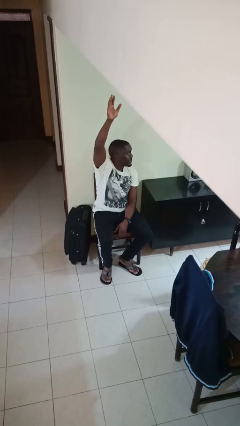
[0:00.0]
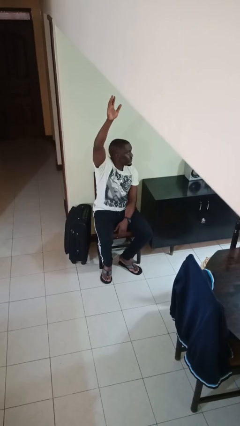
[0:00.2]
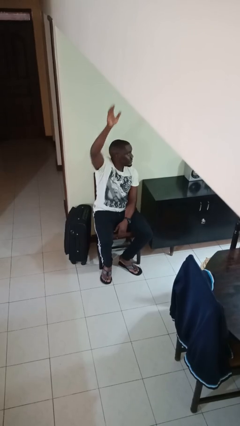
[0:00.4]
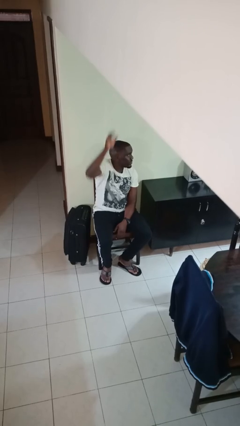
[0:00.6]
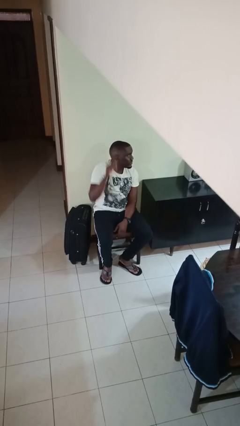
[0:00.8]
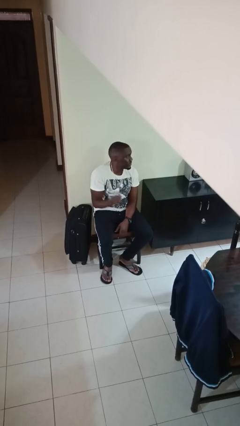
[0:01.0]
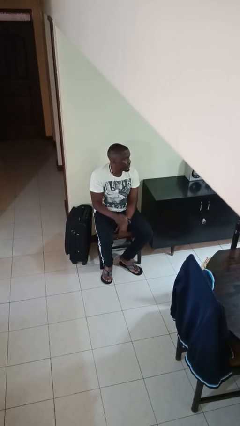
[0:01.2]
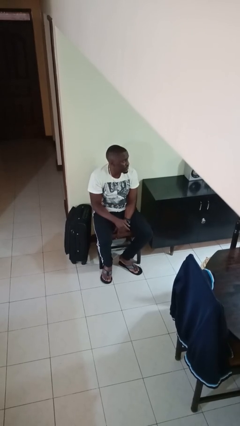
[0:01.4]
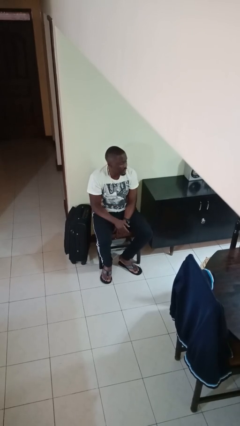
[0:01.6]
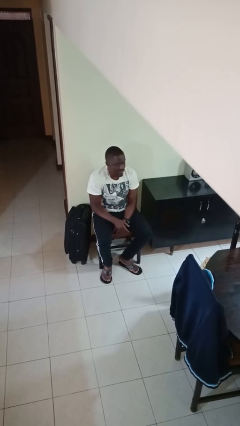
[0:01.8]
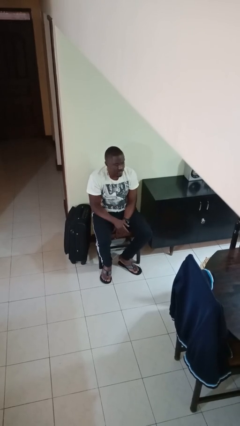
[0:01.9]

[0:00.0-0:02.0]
person gestures lower hand

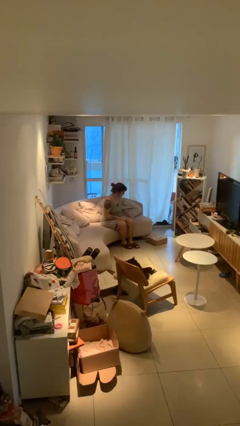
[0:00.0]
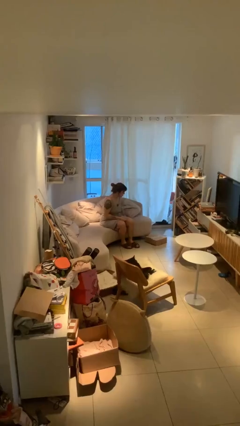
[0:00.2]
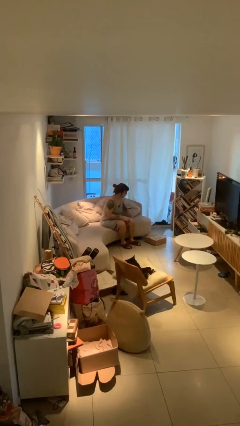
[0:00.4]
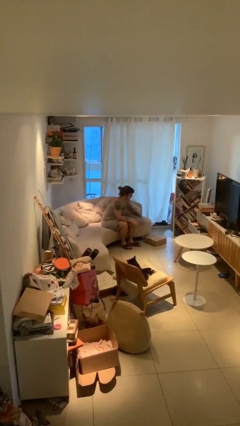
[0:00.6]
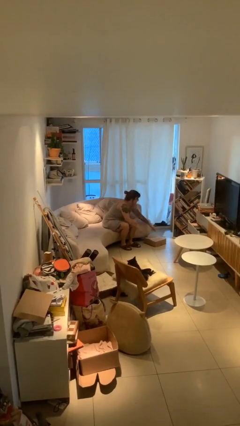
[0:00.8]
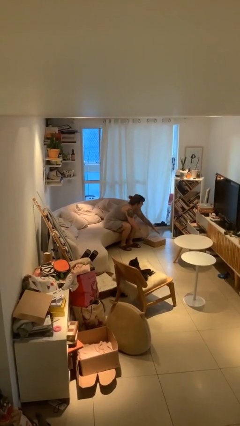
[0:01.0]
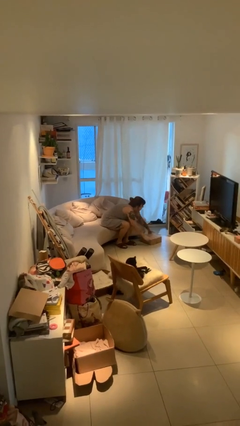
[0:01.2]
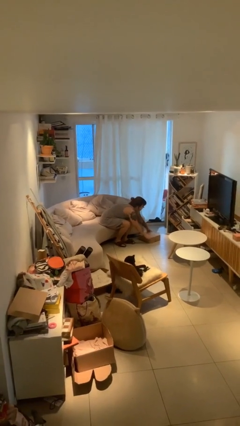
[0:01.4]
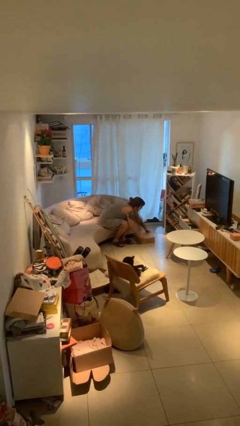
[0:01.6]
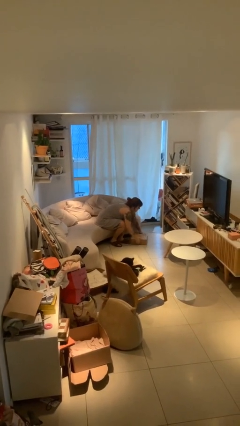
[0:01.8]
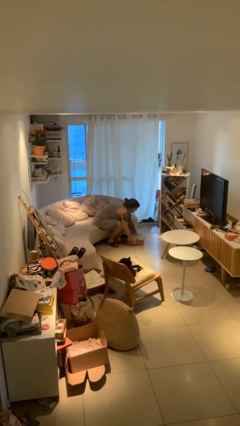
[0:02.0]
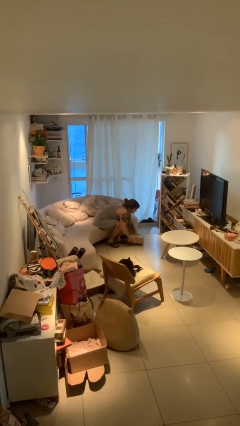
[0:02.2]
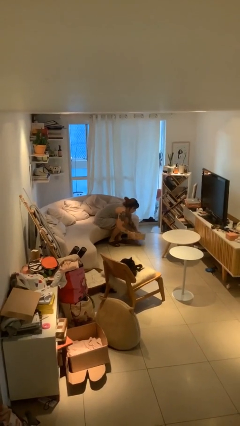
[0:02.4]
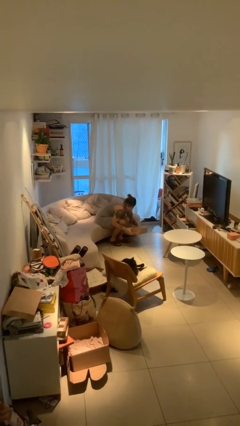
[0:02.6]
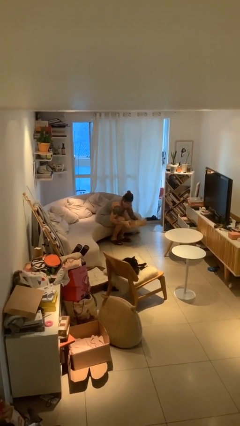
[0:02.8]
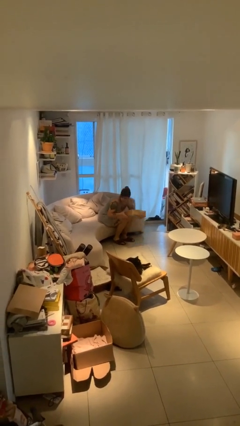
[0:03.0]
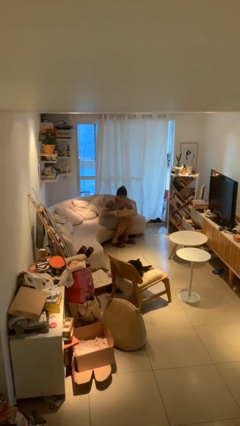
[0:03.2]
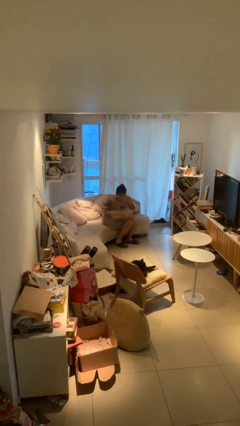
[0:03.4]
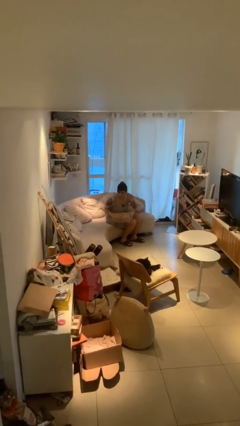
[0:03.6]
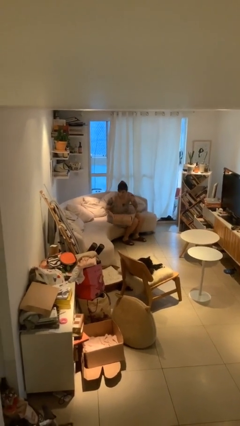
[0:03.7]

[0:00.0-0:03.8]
person picks up object from floor

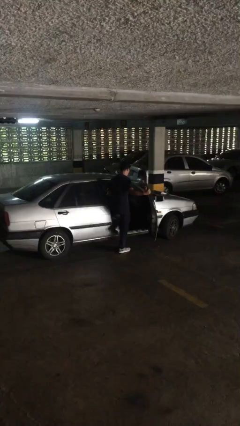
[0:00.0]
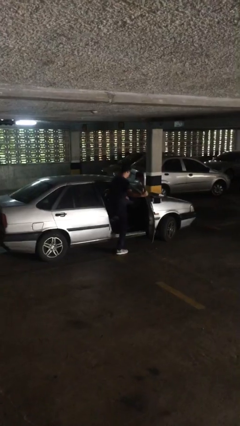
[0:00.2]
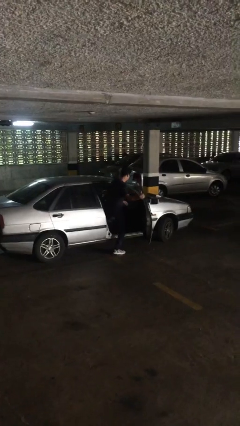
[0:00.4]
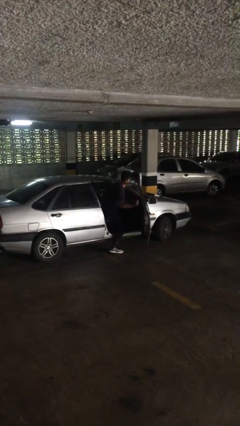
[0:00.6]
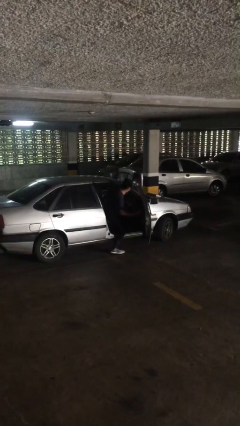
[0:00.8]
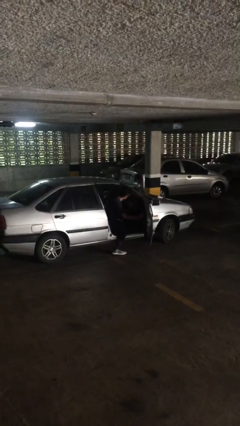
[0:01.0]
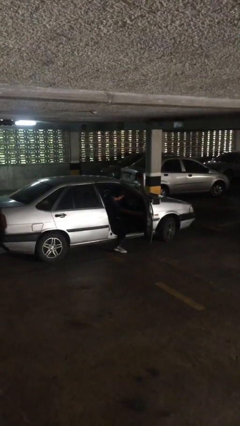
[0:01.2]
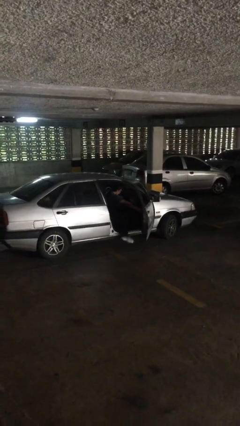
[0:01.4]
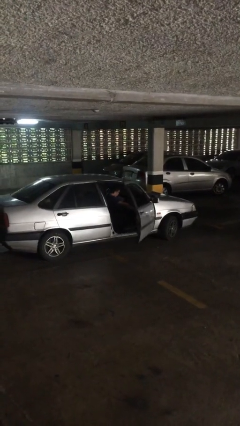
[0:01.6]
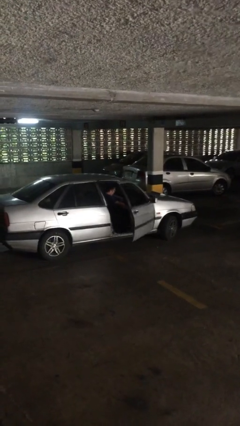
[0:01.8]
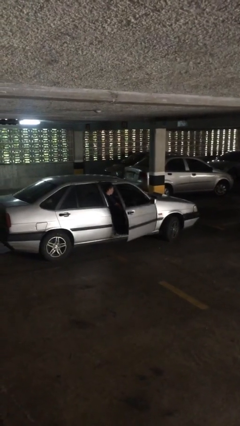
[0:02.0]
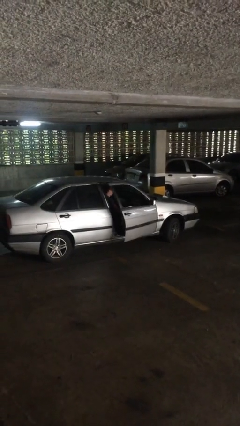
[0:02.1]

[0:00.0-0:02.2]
person enters car

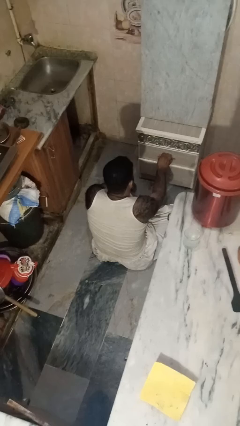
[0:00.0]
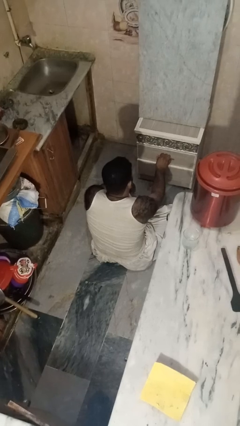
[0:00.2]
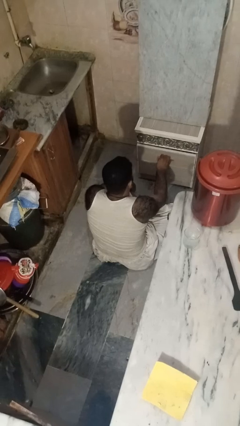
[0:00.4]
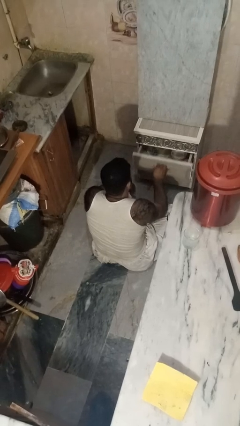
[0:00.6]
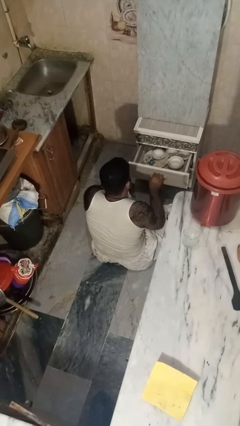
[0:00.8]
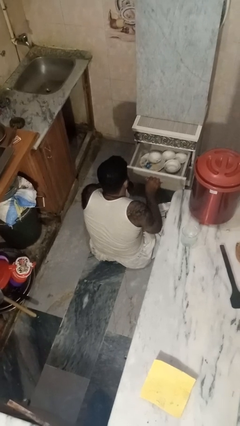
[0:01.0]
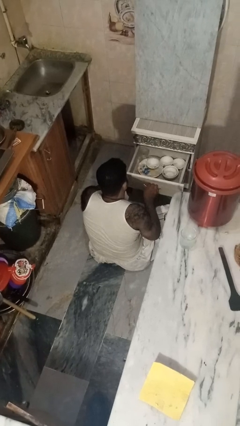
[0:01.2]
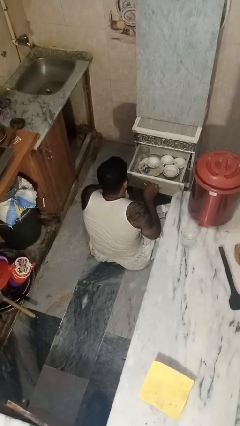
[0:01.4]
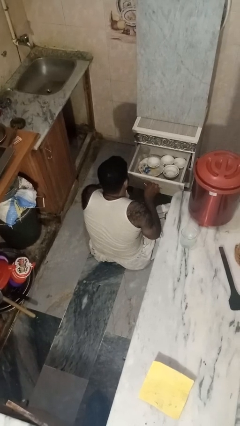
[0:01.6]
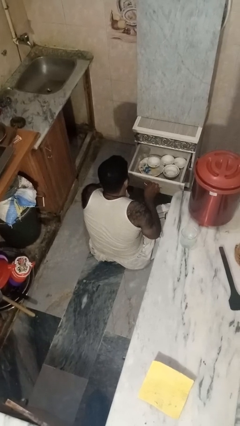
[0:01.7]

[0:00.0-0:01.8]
person opens kitchen drawer

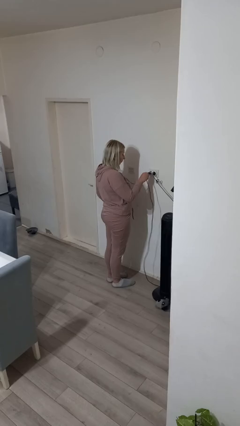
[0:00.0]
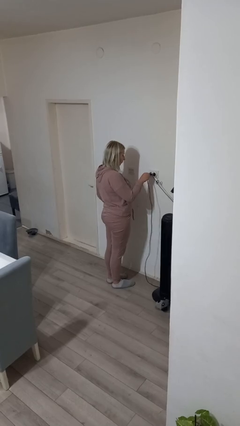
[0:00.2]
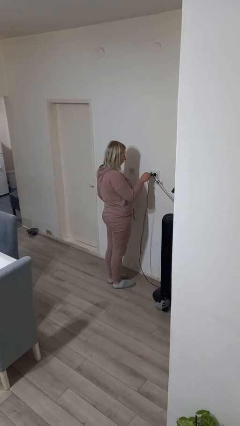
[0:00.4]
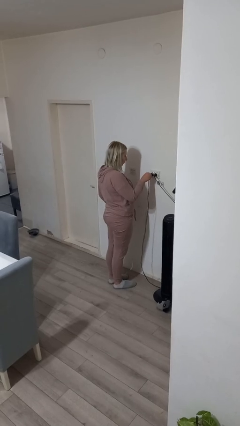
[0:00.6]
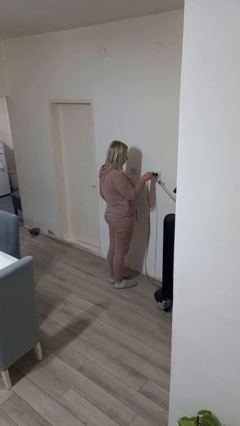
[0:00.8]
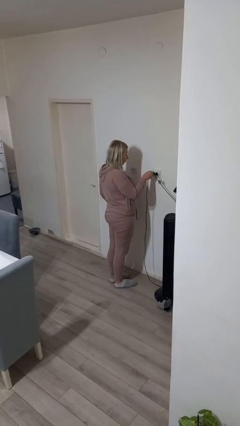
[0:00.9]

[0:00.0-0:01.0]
person plugs into electrical socket

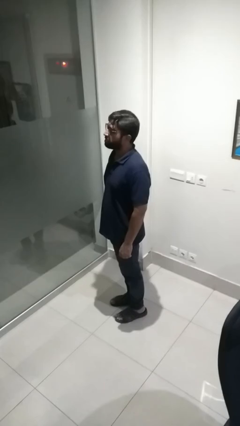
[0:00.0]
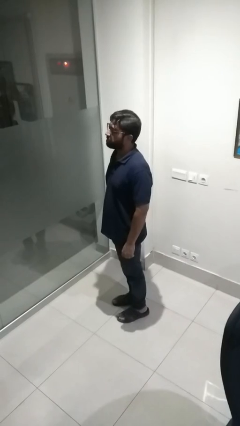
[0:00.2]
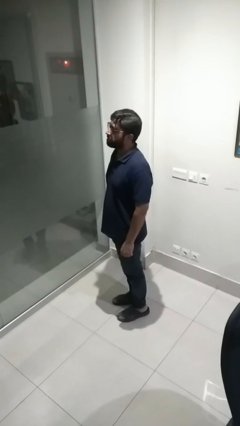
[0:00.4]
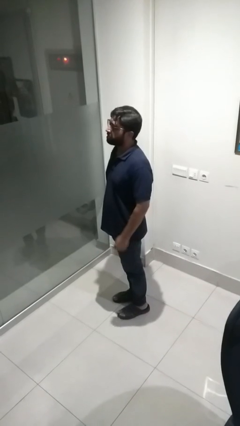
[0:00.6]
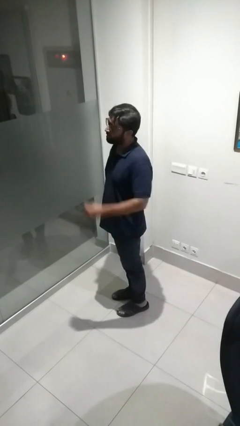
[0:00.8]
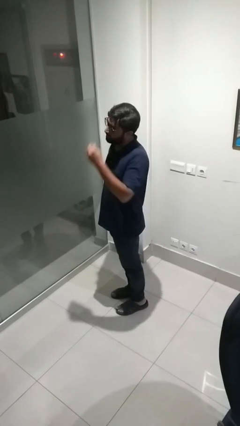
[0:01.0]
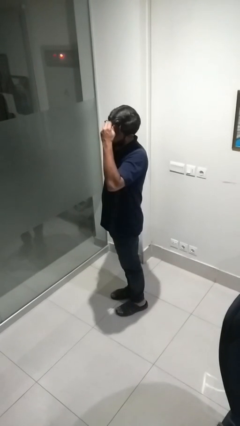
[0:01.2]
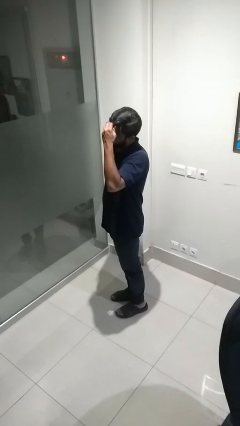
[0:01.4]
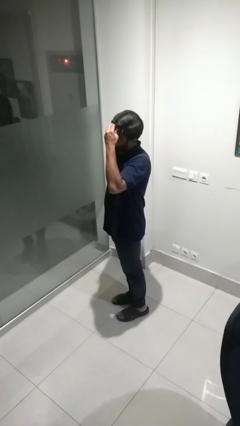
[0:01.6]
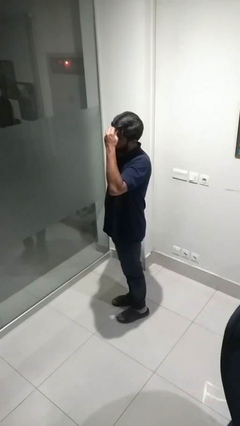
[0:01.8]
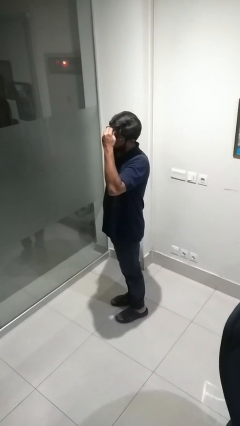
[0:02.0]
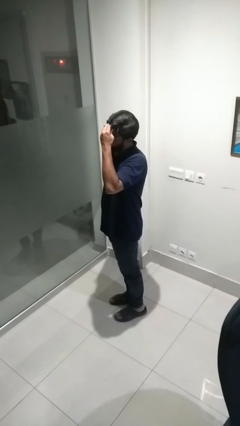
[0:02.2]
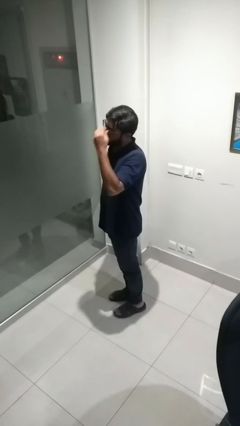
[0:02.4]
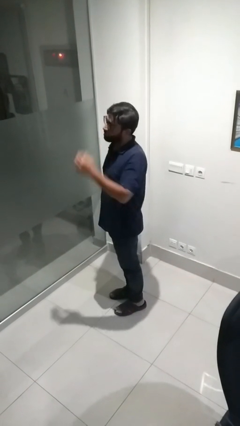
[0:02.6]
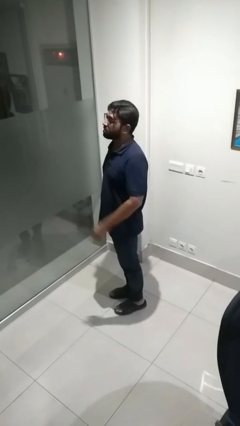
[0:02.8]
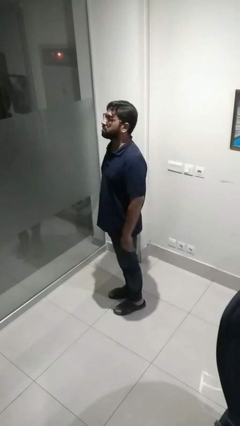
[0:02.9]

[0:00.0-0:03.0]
person scratches face

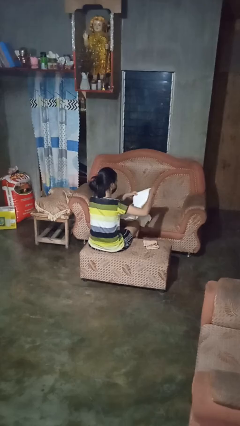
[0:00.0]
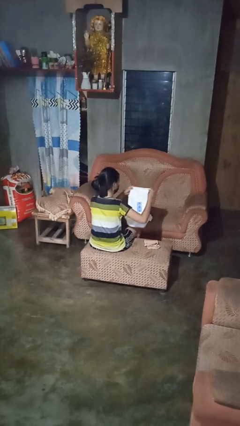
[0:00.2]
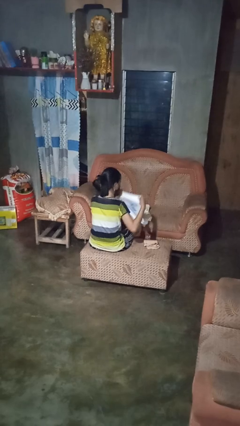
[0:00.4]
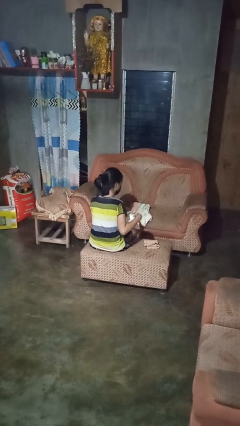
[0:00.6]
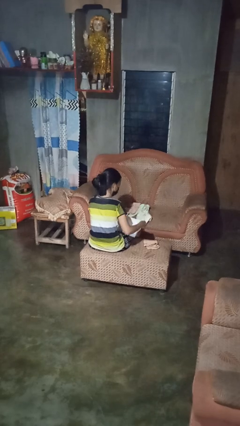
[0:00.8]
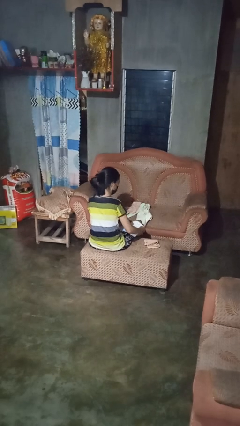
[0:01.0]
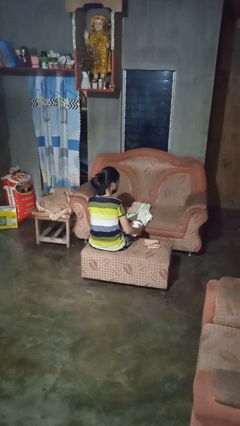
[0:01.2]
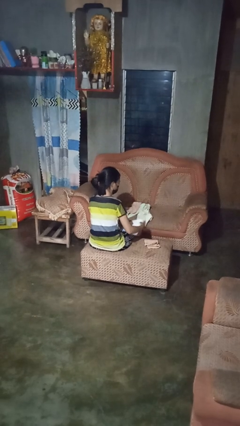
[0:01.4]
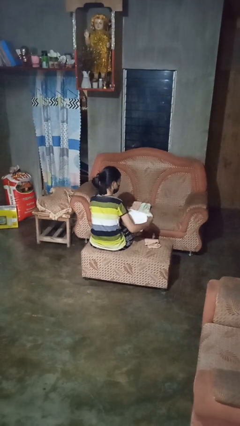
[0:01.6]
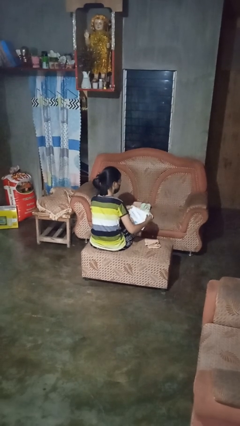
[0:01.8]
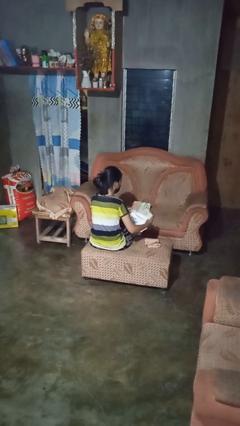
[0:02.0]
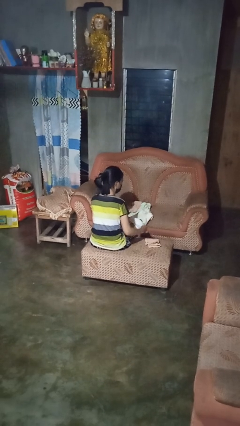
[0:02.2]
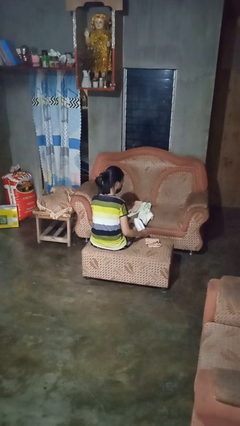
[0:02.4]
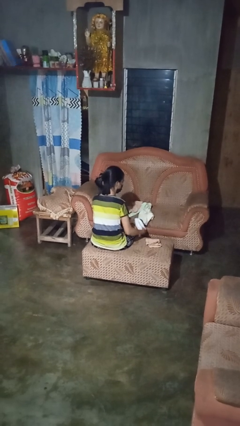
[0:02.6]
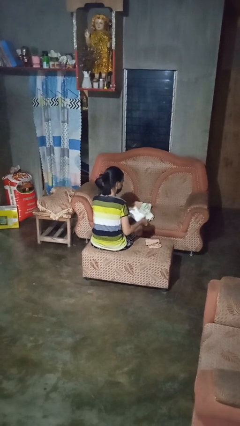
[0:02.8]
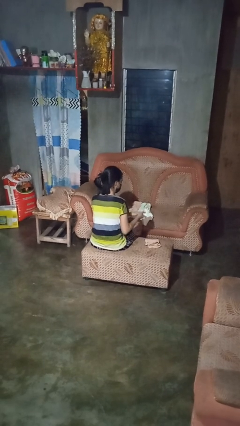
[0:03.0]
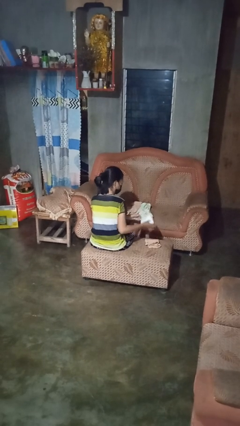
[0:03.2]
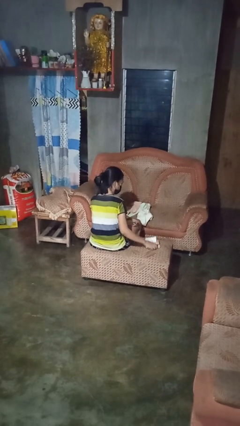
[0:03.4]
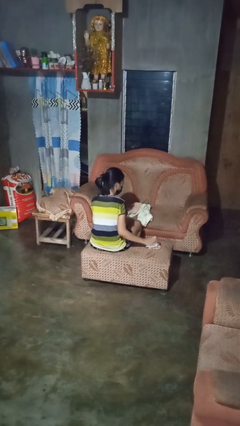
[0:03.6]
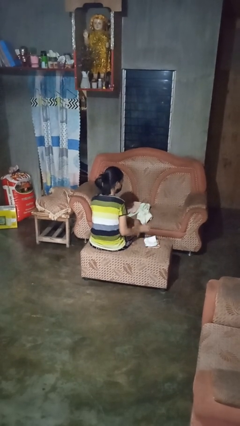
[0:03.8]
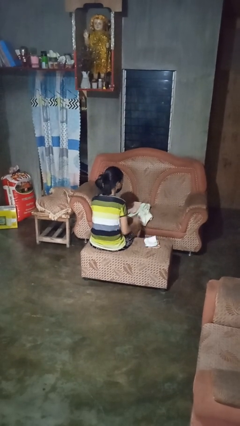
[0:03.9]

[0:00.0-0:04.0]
person folds towel
